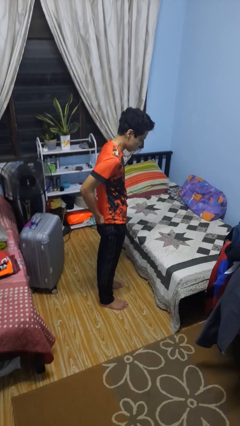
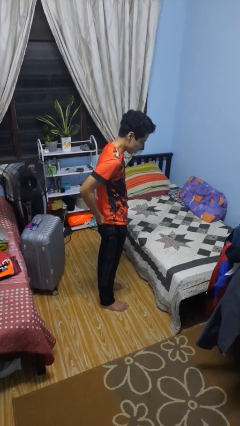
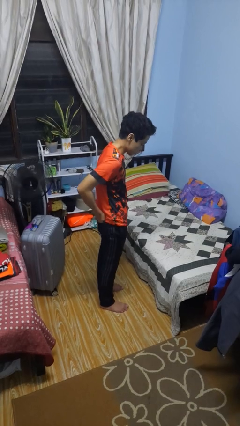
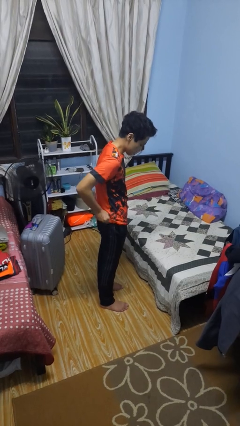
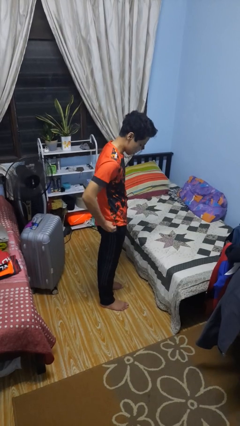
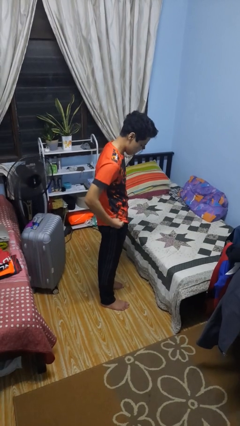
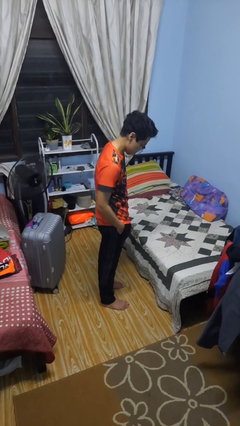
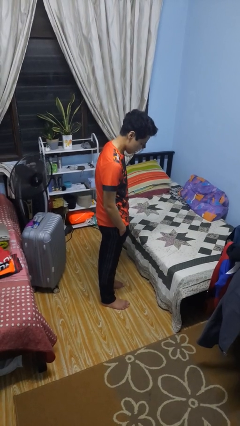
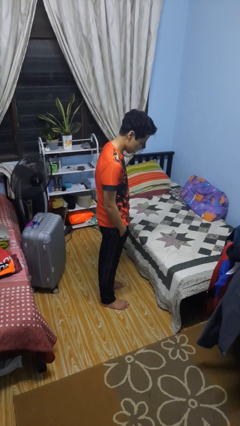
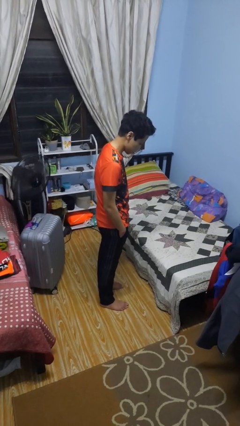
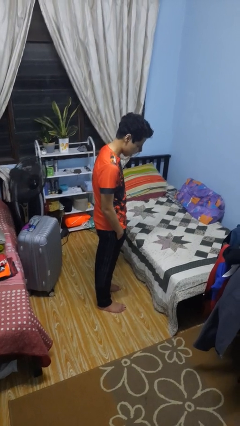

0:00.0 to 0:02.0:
person puts hands in back pockets

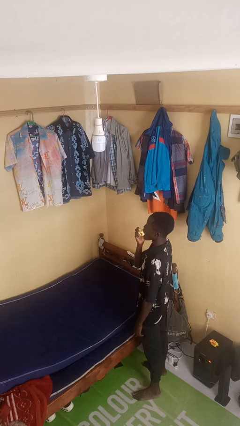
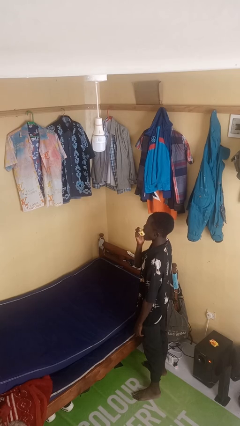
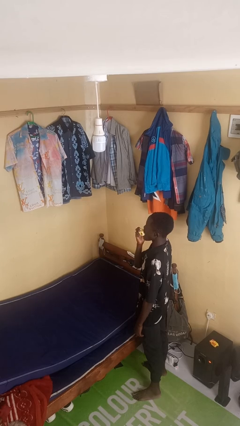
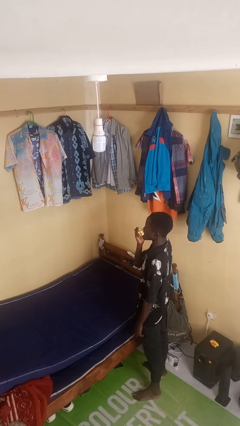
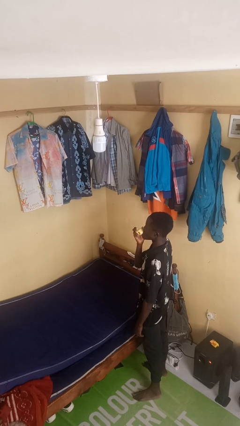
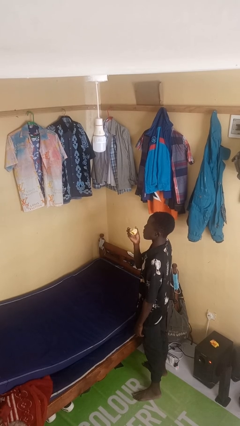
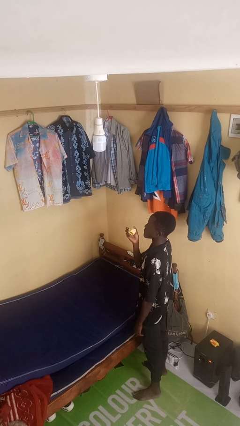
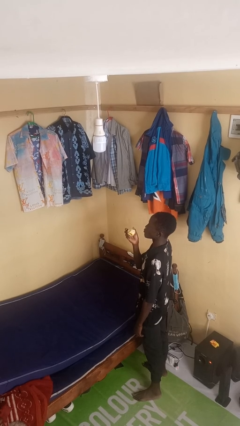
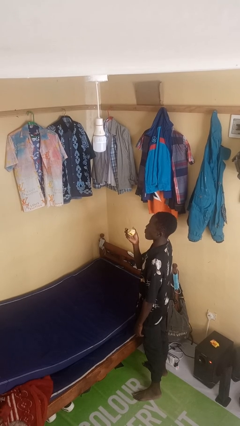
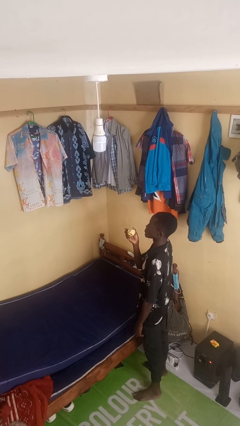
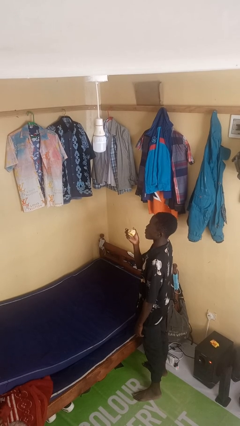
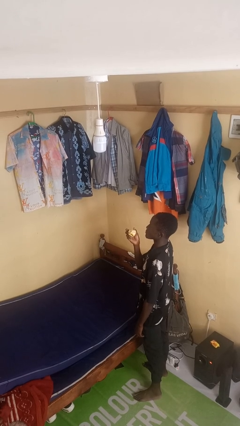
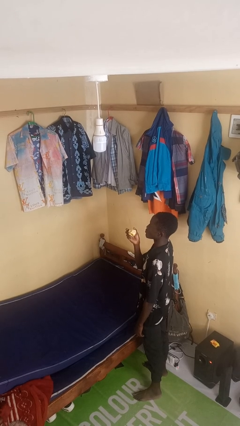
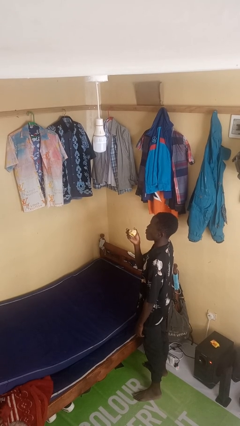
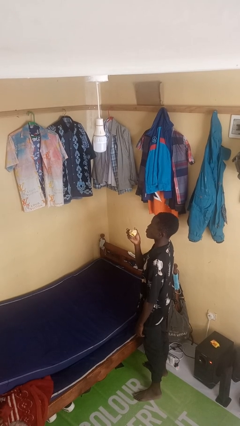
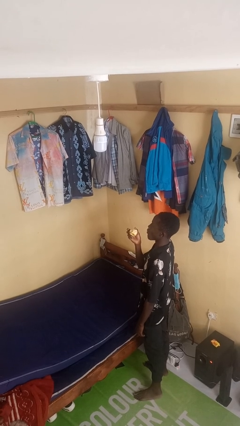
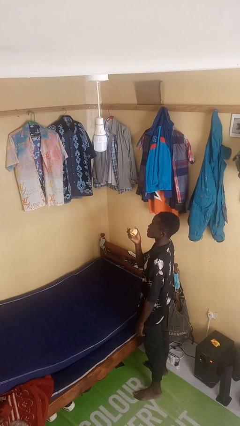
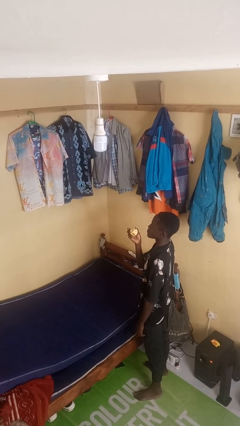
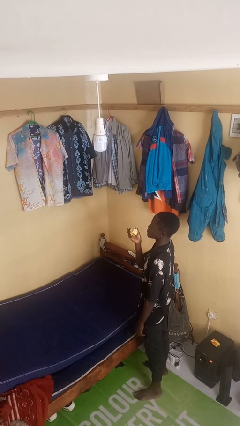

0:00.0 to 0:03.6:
person eats apple

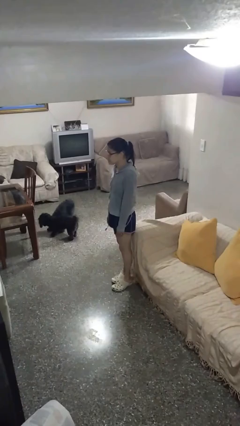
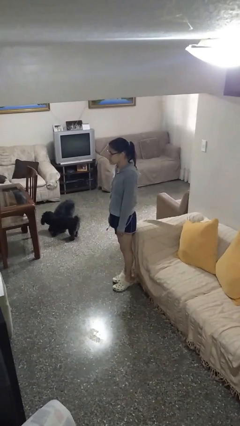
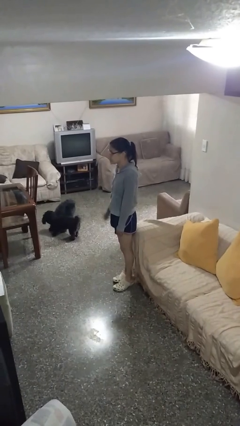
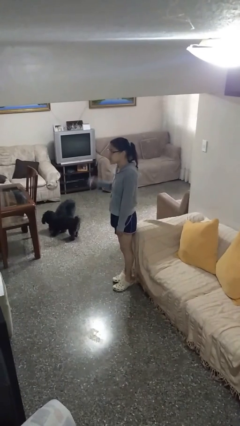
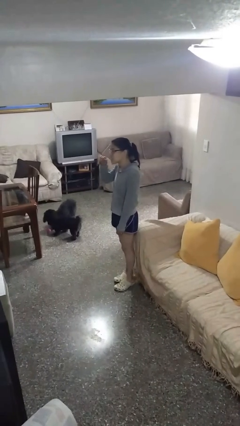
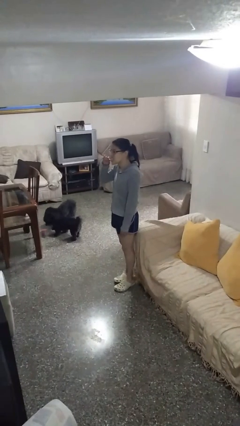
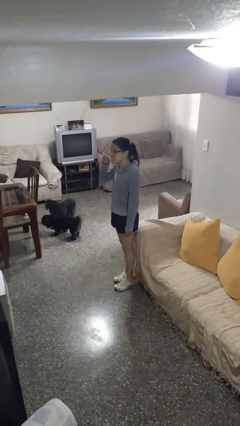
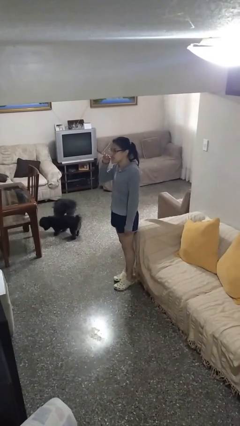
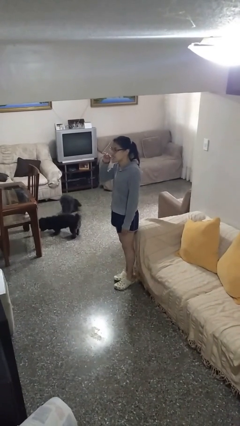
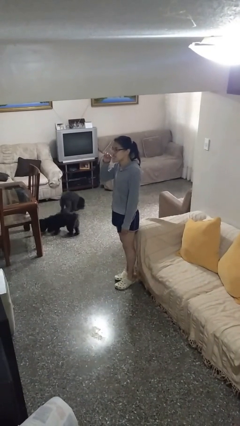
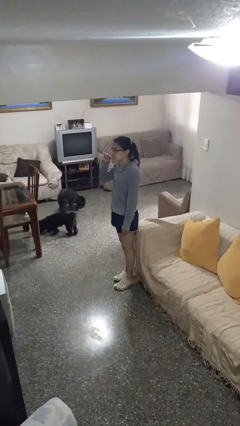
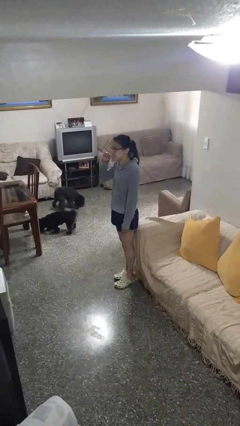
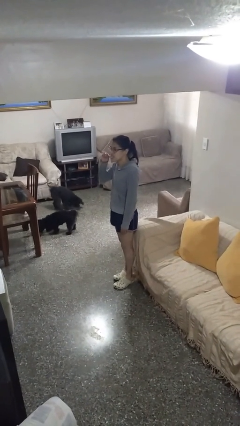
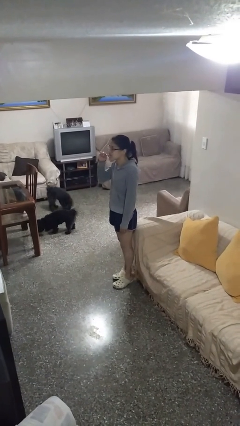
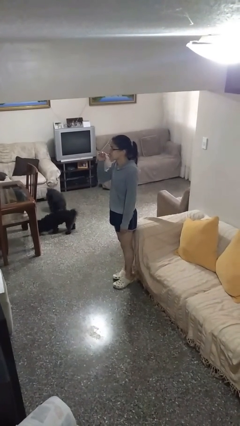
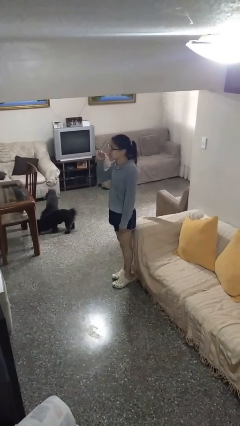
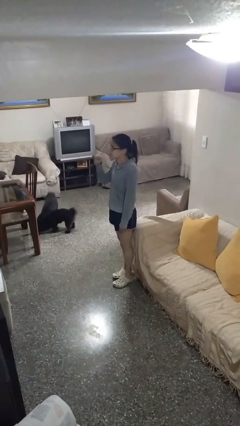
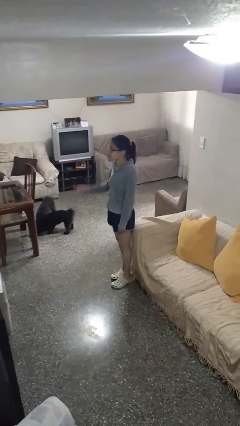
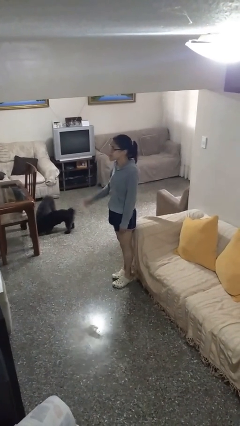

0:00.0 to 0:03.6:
person brushes teeth

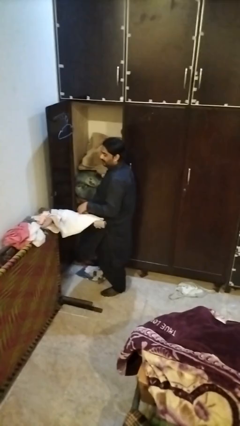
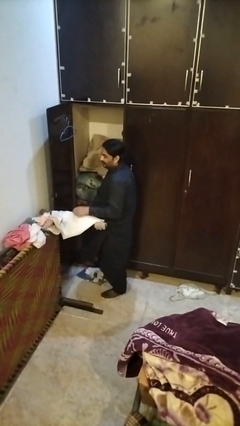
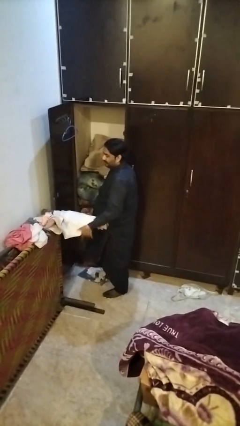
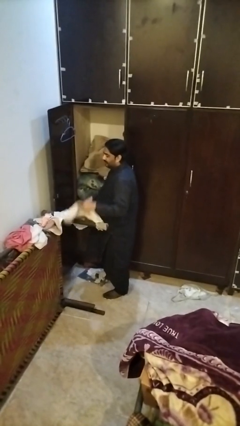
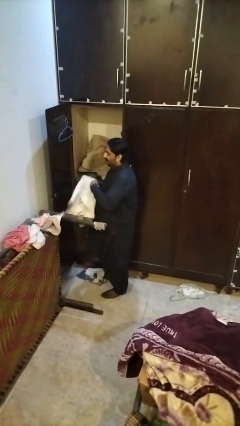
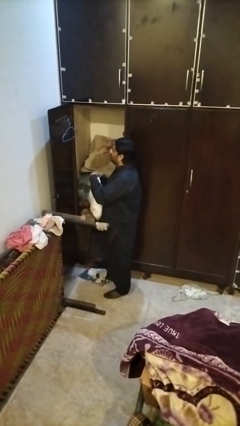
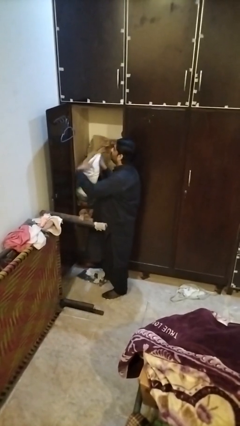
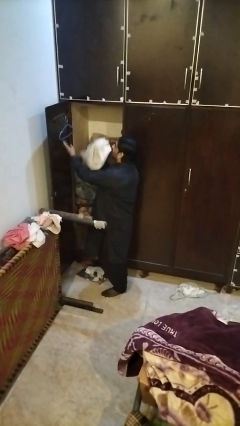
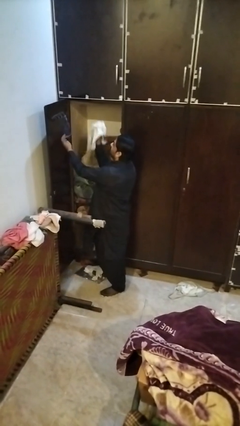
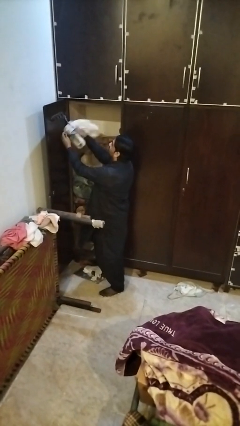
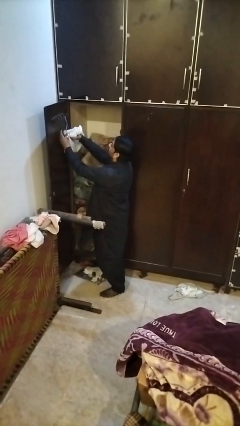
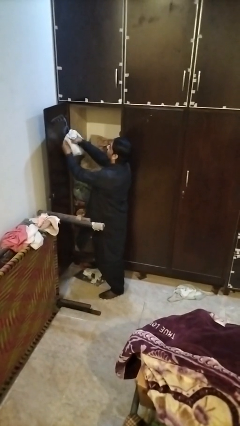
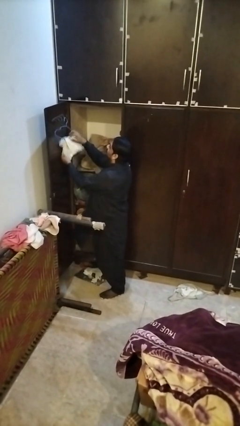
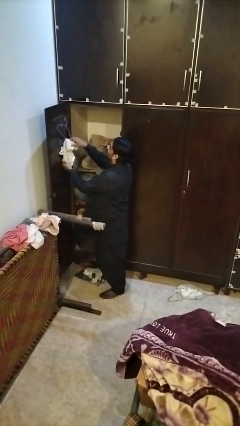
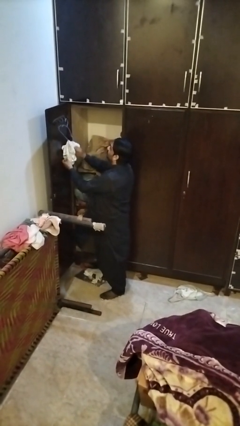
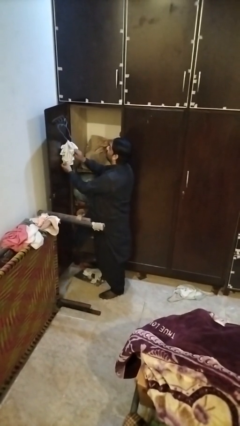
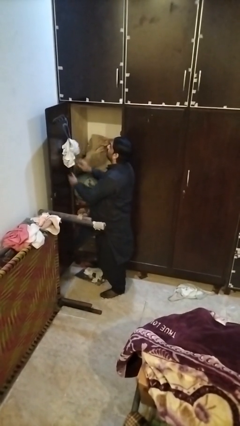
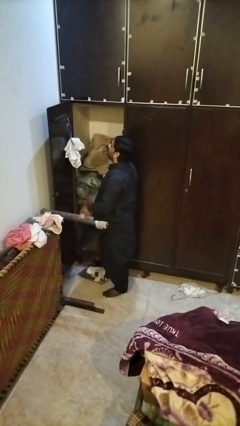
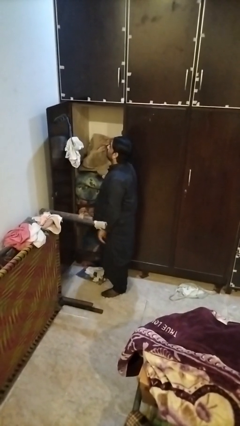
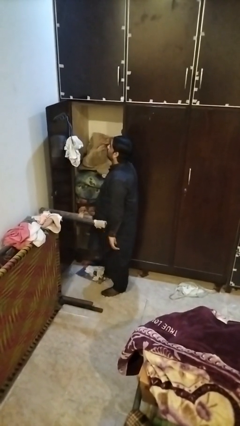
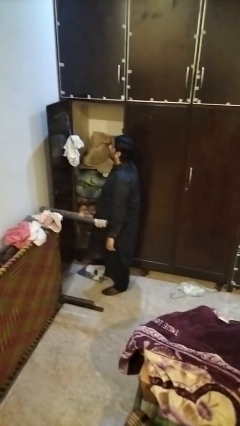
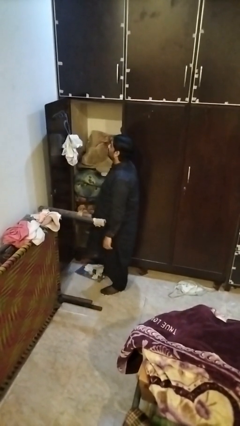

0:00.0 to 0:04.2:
person puts clothes into closet

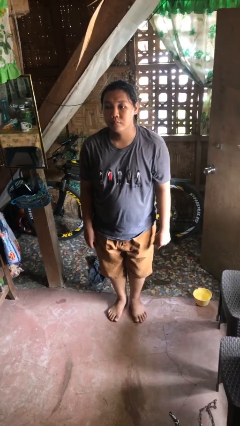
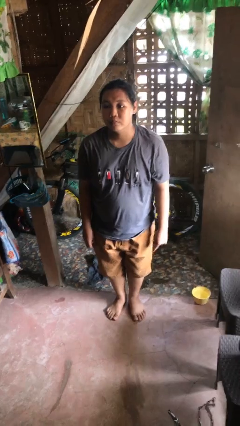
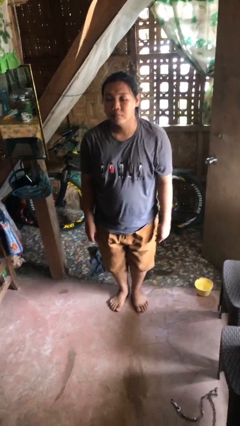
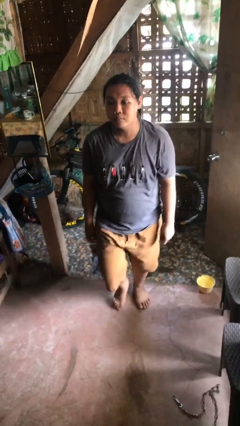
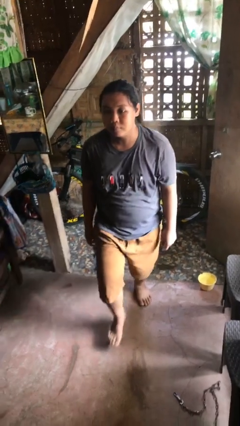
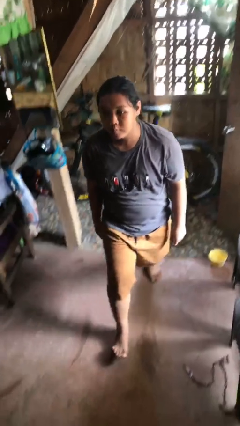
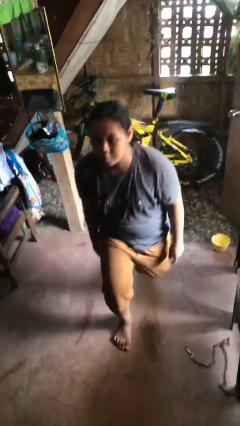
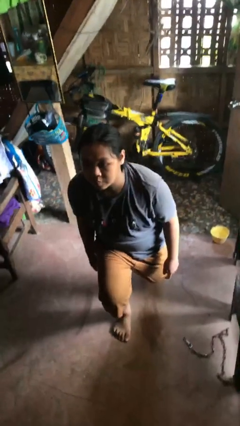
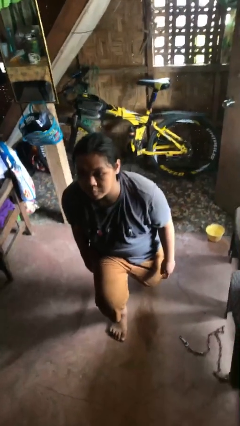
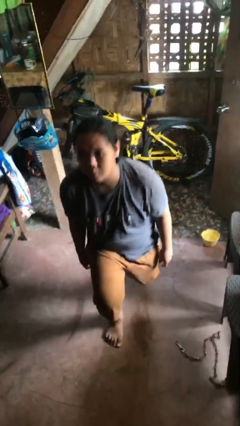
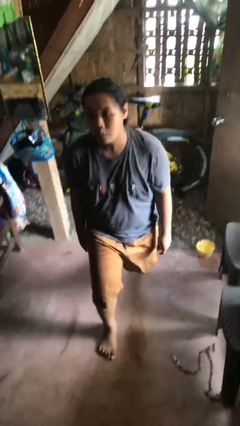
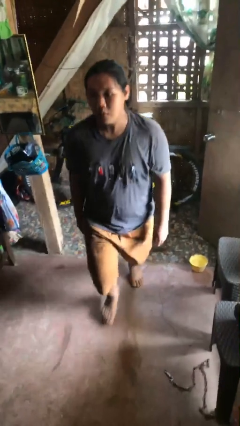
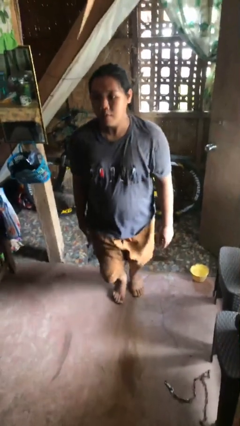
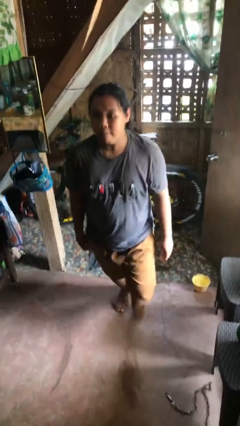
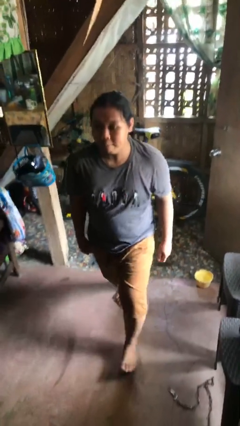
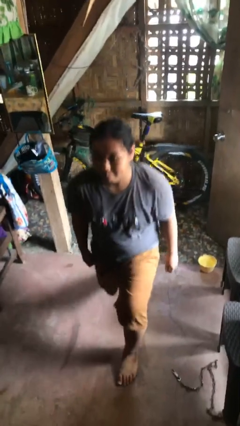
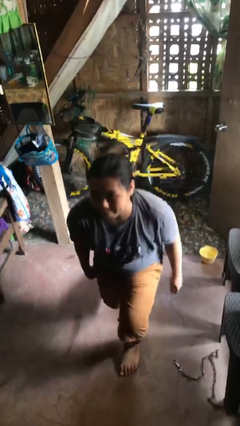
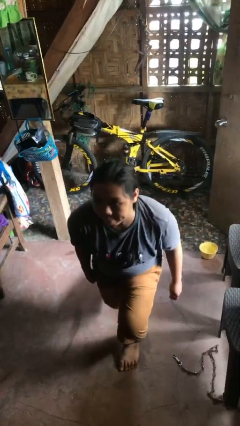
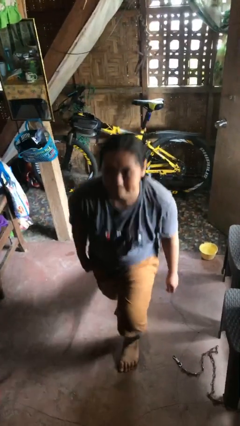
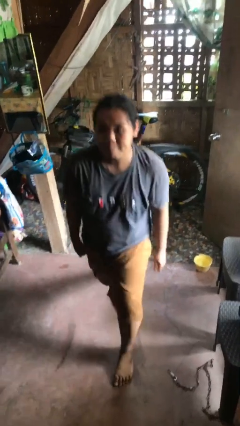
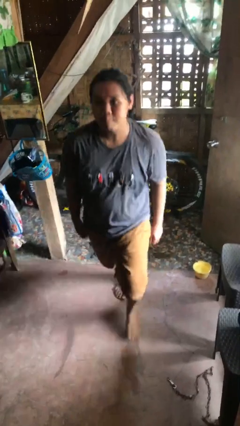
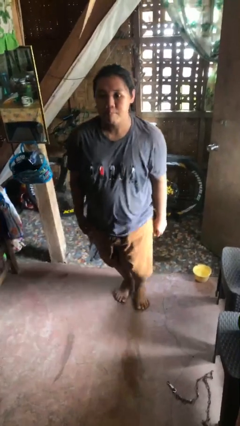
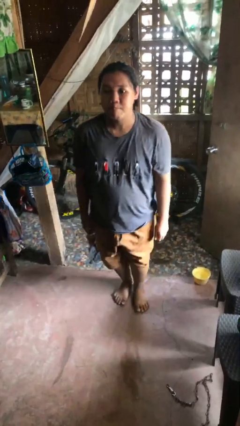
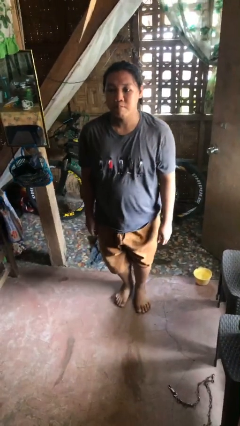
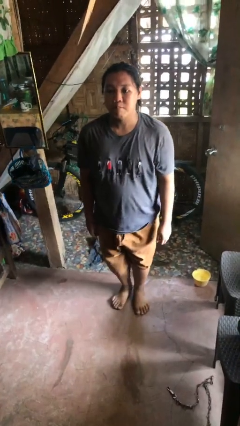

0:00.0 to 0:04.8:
person exercises with lunges
